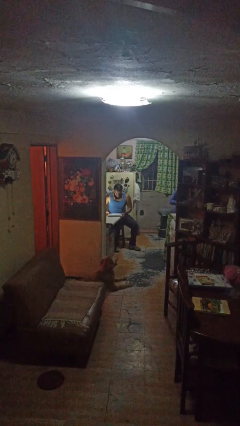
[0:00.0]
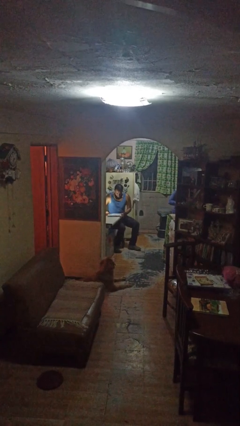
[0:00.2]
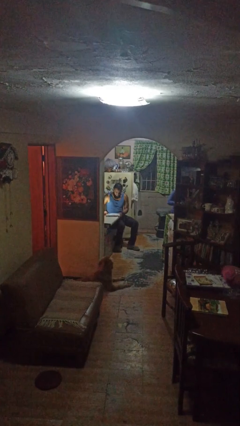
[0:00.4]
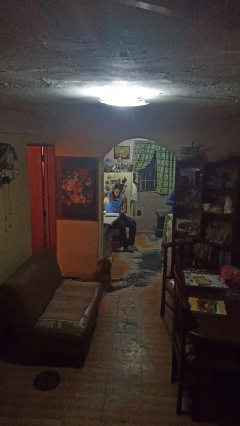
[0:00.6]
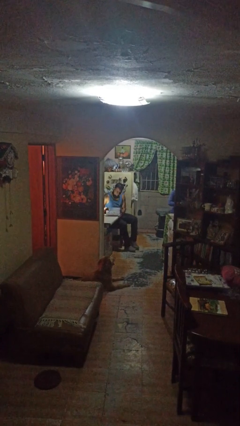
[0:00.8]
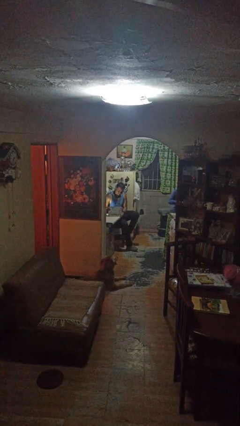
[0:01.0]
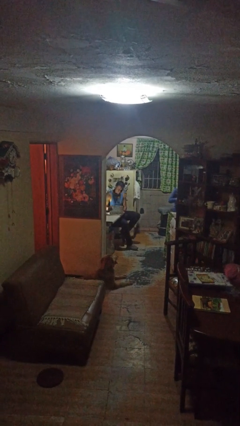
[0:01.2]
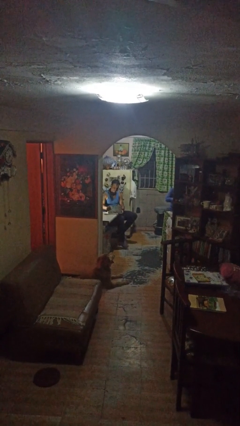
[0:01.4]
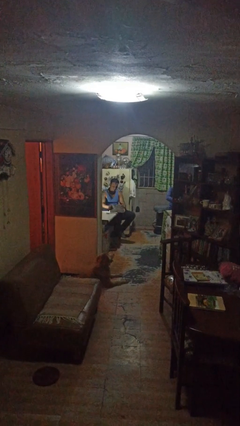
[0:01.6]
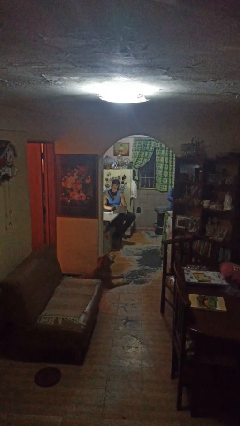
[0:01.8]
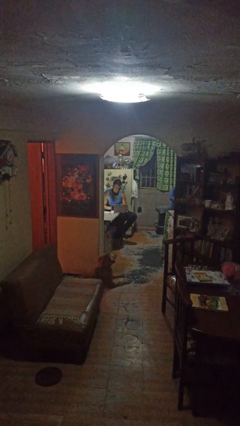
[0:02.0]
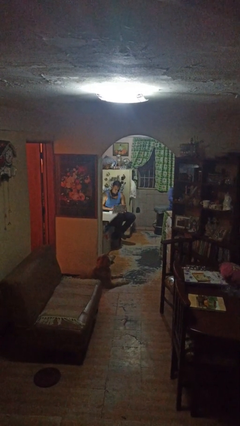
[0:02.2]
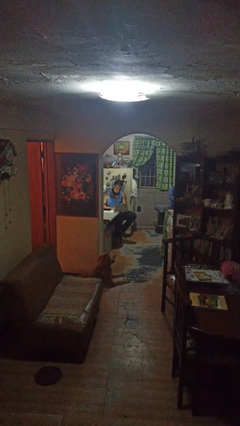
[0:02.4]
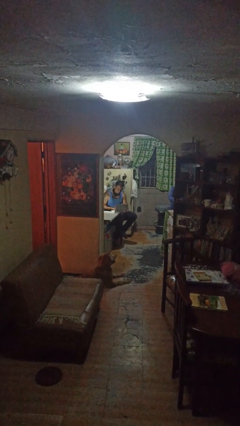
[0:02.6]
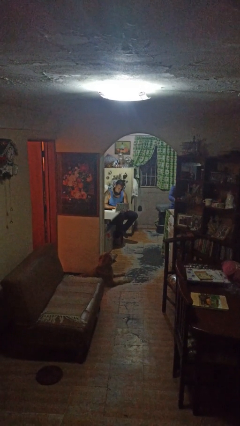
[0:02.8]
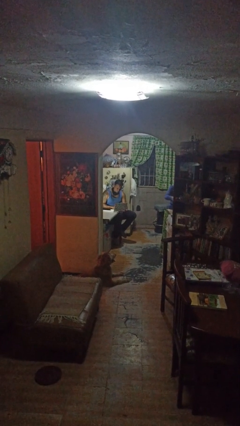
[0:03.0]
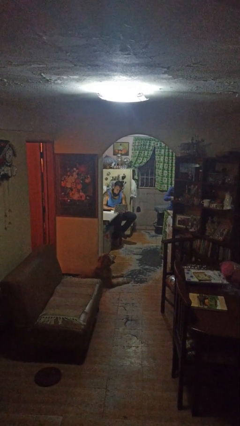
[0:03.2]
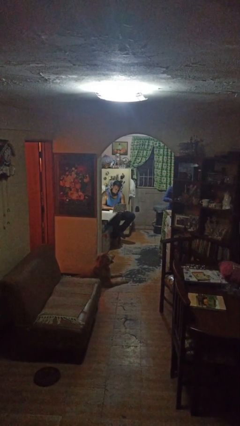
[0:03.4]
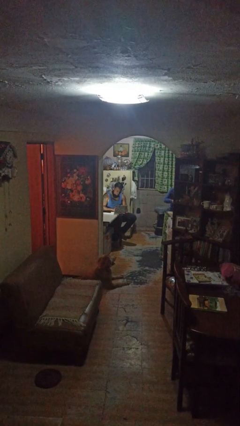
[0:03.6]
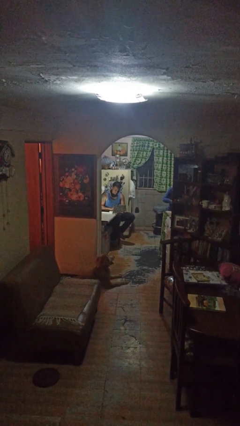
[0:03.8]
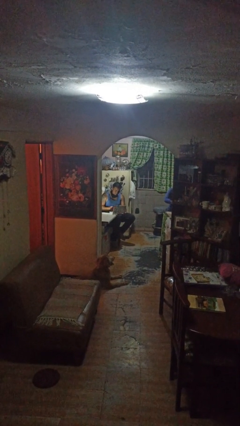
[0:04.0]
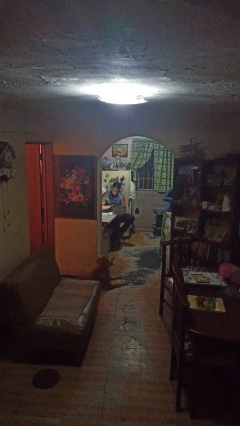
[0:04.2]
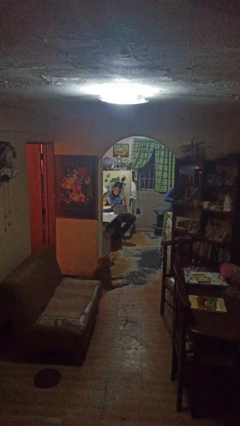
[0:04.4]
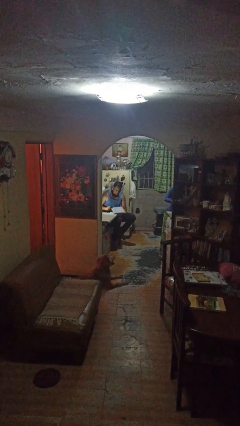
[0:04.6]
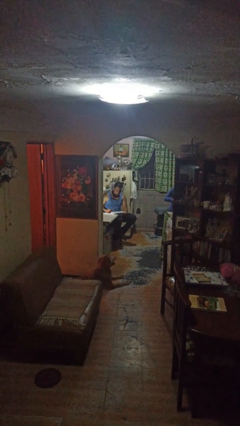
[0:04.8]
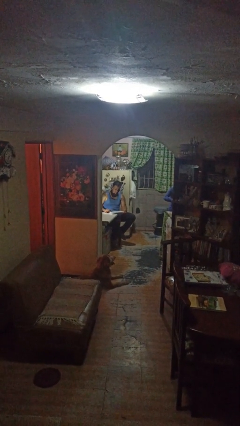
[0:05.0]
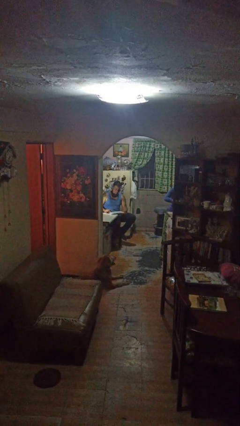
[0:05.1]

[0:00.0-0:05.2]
person interacts with laptop

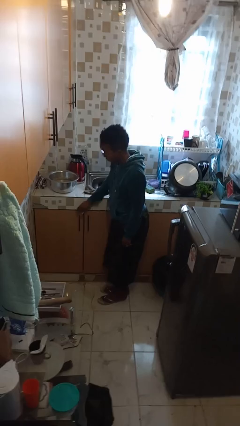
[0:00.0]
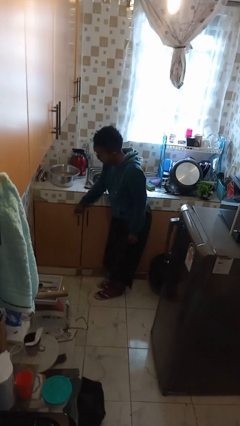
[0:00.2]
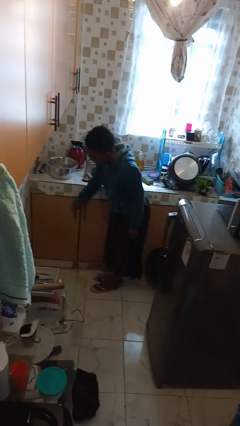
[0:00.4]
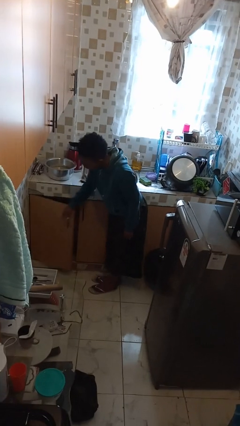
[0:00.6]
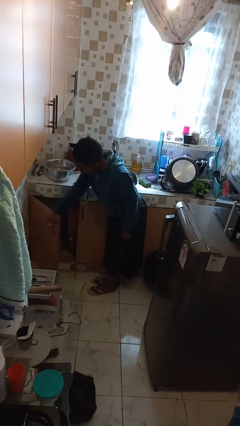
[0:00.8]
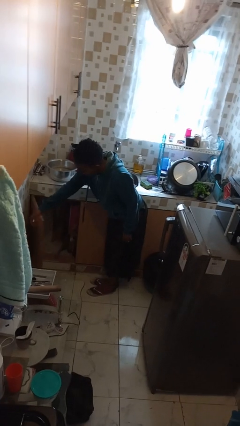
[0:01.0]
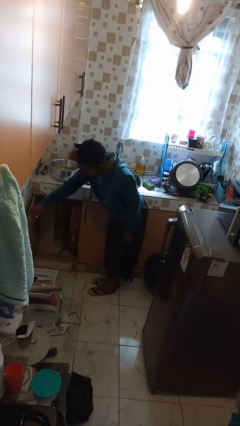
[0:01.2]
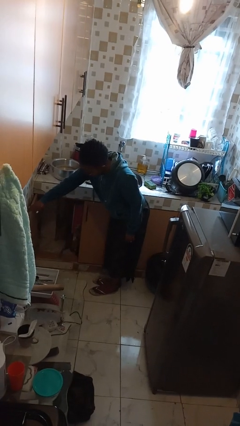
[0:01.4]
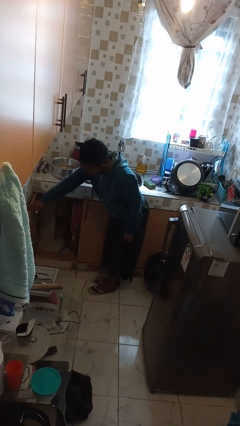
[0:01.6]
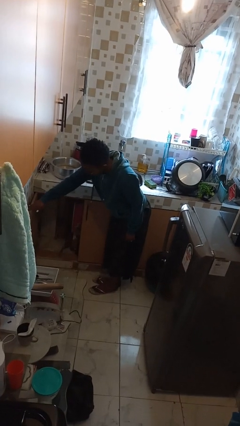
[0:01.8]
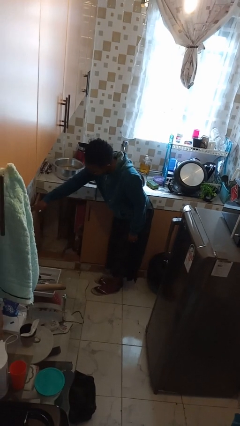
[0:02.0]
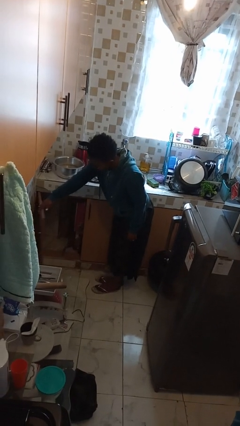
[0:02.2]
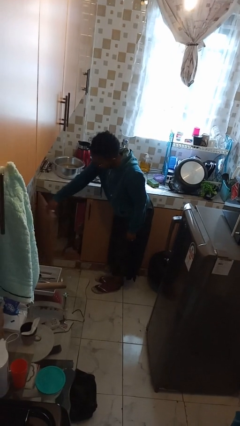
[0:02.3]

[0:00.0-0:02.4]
person opens cabinet

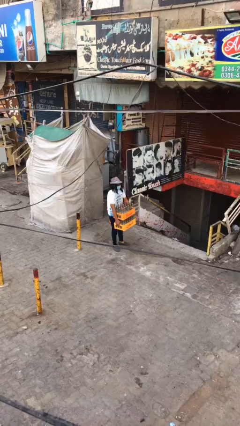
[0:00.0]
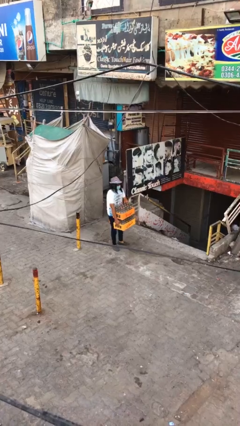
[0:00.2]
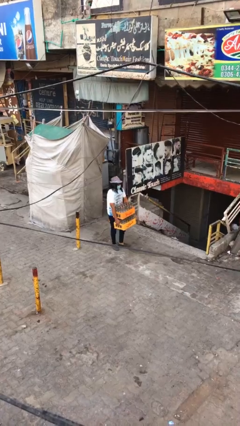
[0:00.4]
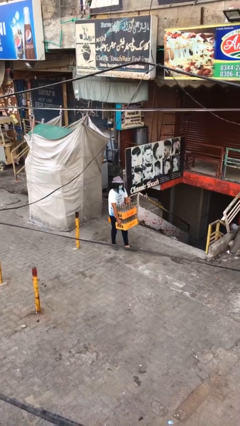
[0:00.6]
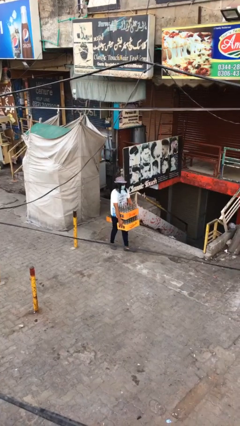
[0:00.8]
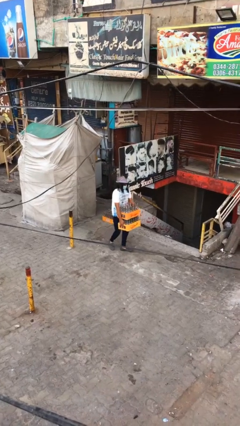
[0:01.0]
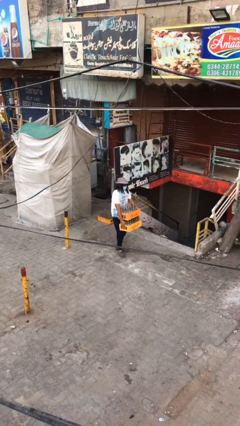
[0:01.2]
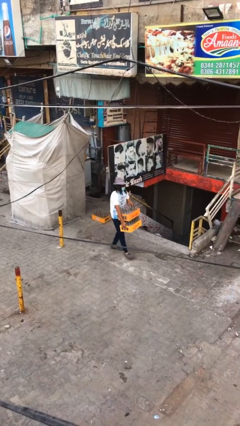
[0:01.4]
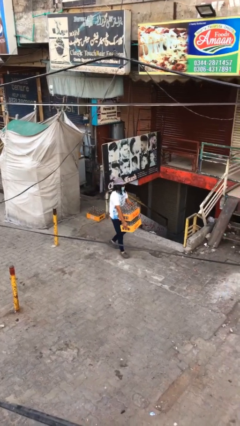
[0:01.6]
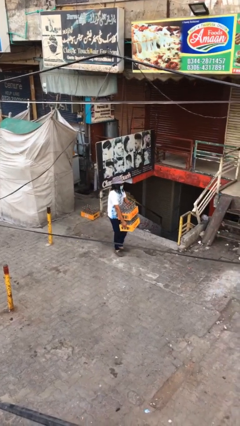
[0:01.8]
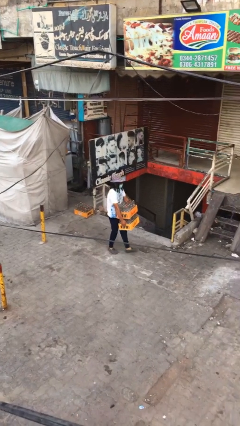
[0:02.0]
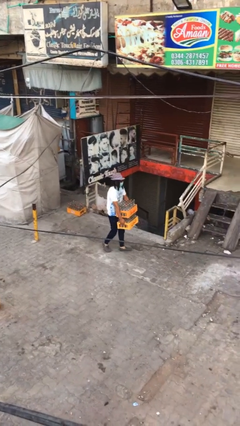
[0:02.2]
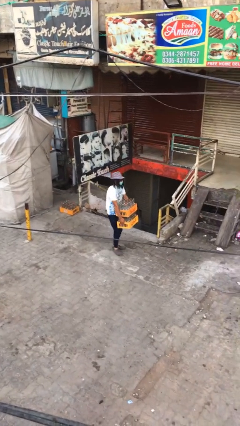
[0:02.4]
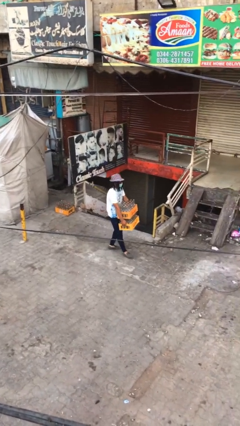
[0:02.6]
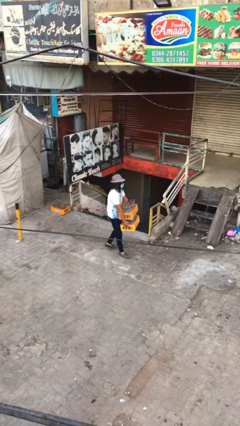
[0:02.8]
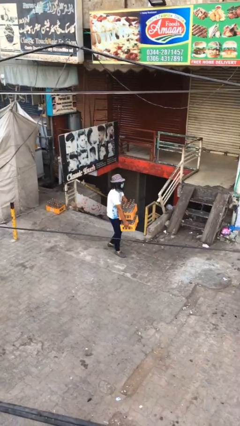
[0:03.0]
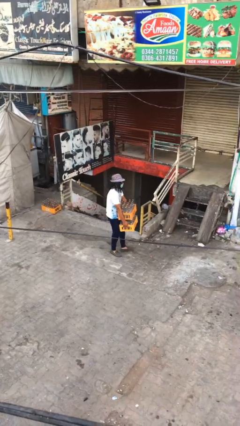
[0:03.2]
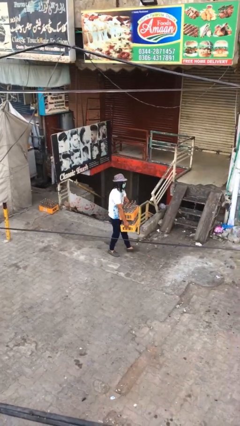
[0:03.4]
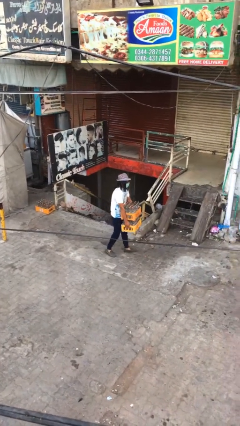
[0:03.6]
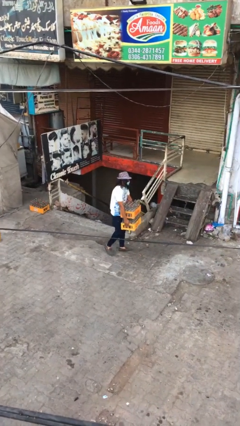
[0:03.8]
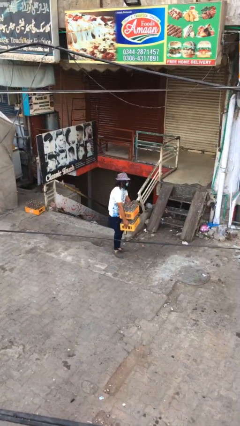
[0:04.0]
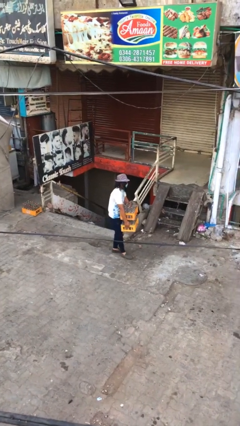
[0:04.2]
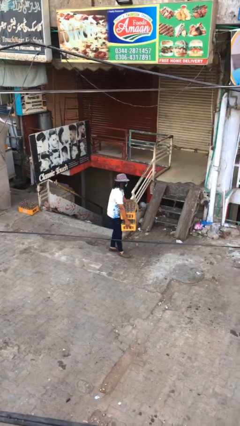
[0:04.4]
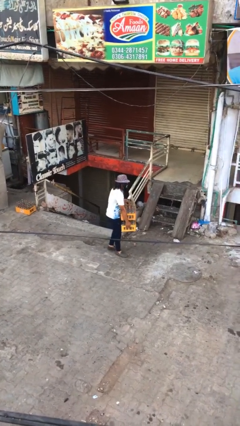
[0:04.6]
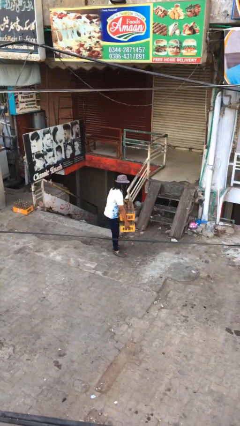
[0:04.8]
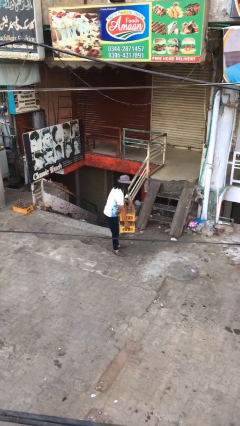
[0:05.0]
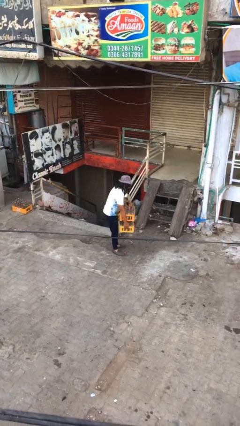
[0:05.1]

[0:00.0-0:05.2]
person carries heavy object

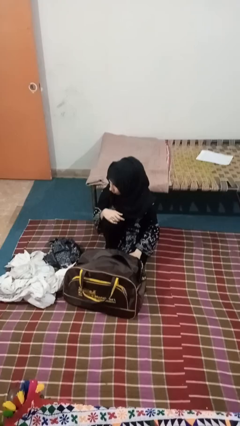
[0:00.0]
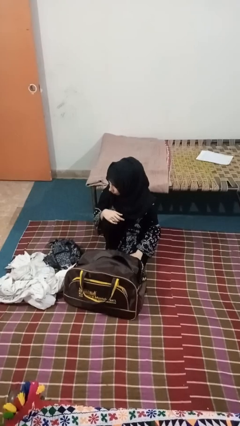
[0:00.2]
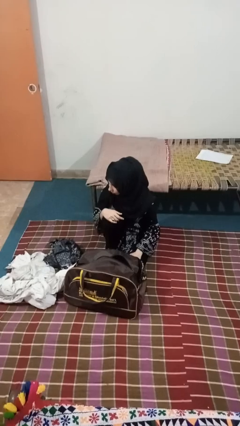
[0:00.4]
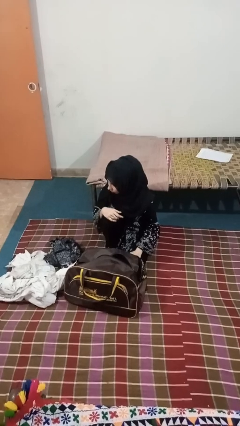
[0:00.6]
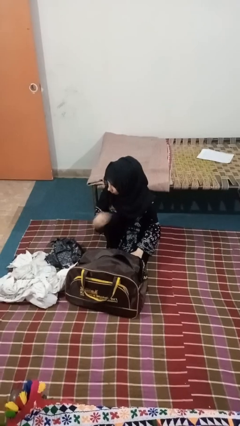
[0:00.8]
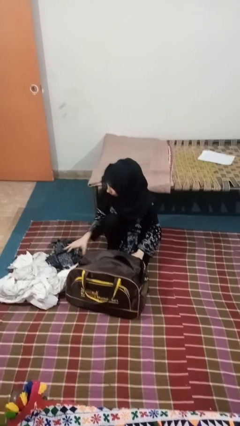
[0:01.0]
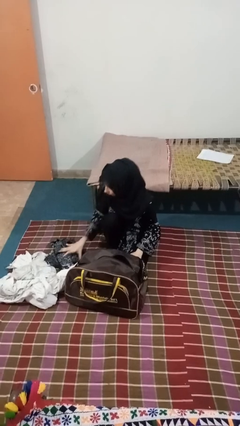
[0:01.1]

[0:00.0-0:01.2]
person loads clothes into suitcase

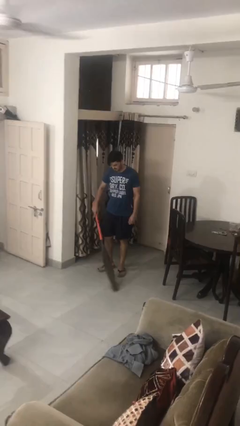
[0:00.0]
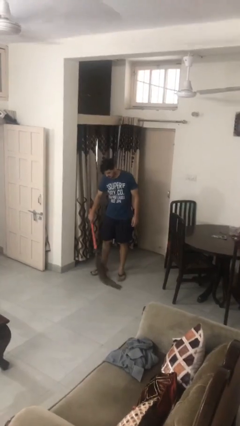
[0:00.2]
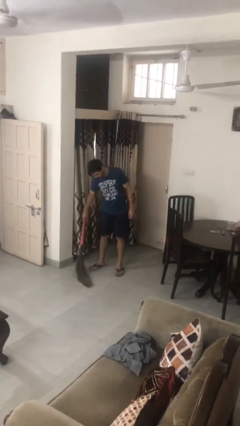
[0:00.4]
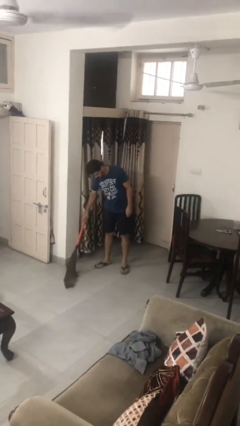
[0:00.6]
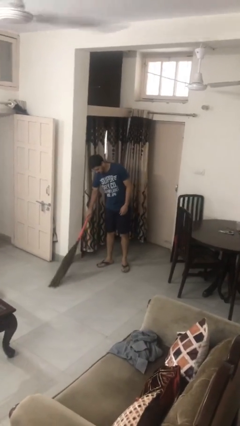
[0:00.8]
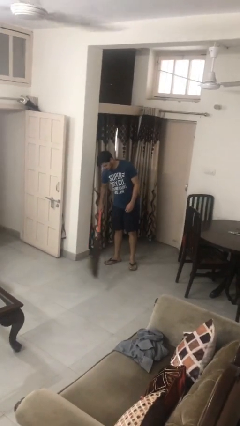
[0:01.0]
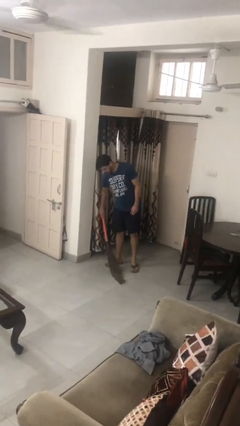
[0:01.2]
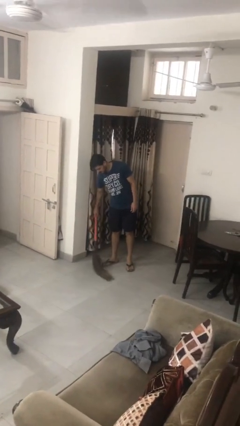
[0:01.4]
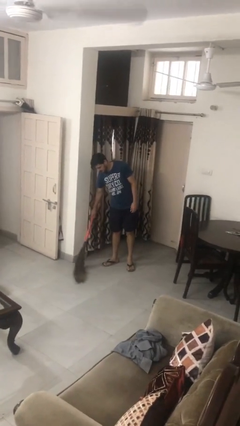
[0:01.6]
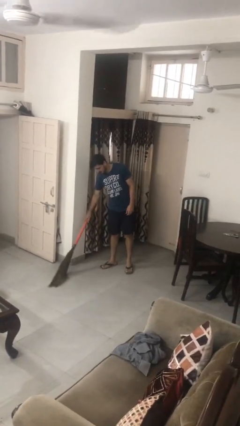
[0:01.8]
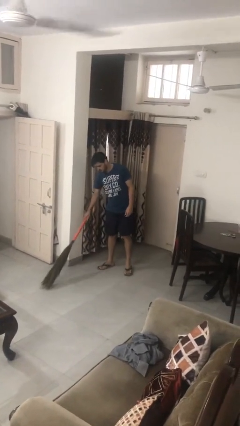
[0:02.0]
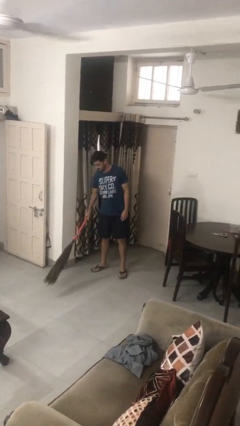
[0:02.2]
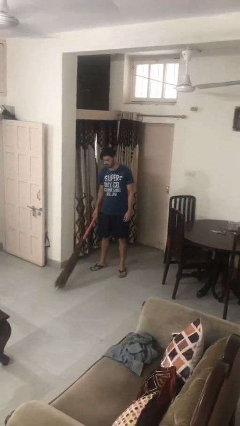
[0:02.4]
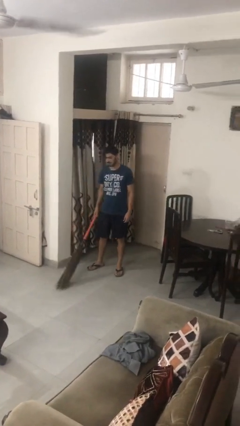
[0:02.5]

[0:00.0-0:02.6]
person sweeps floor

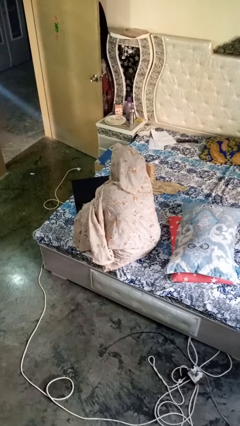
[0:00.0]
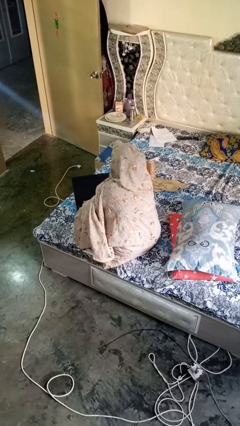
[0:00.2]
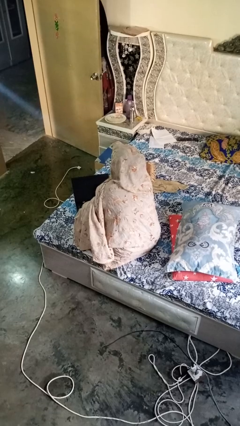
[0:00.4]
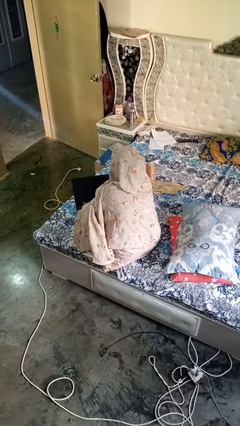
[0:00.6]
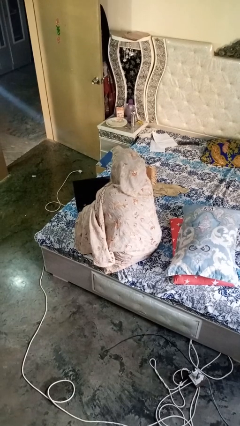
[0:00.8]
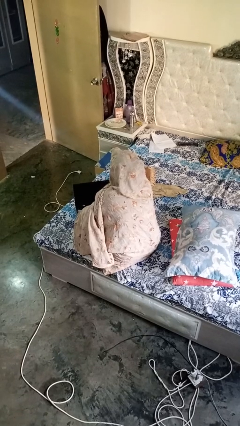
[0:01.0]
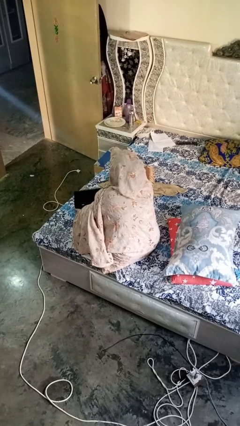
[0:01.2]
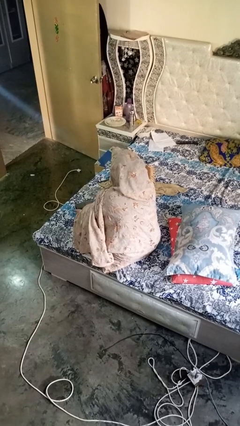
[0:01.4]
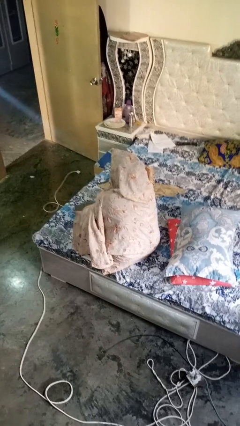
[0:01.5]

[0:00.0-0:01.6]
person closes laptop
